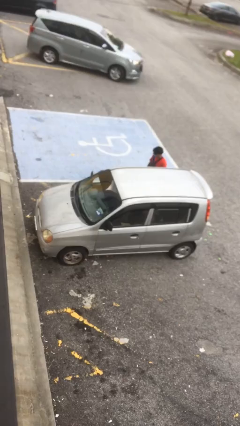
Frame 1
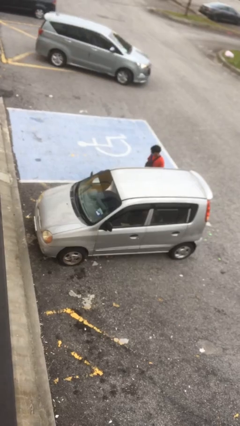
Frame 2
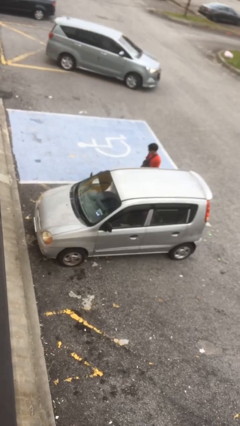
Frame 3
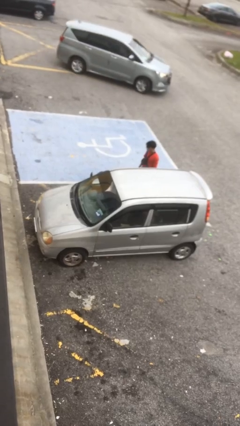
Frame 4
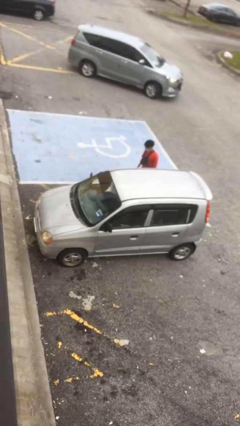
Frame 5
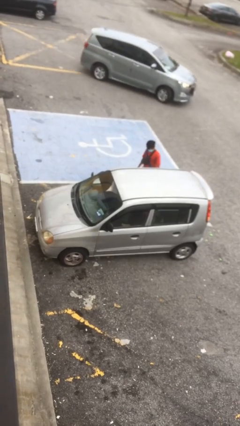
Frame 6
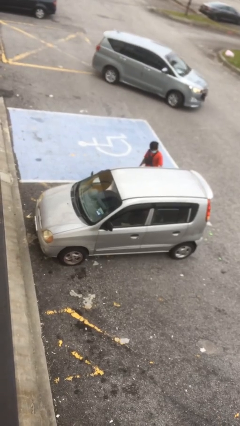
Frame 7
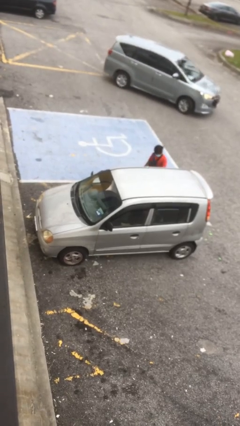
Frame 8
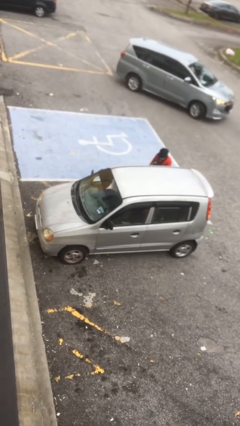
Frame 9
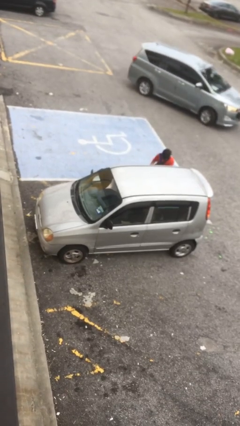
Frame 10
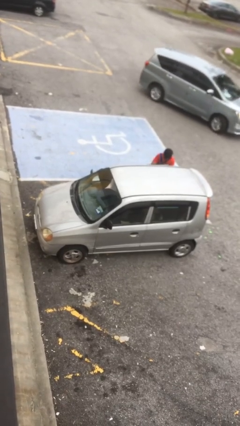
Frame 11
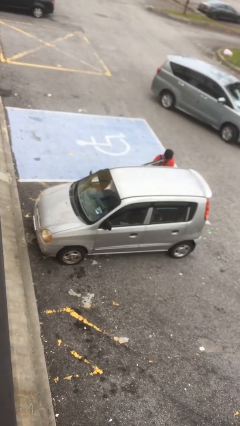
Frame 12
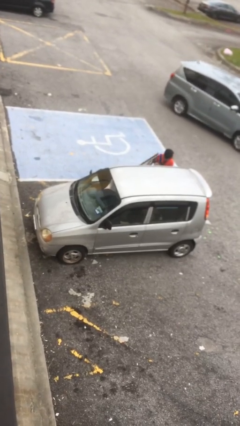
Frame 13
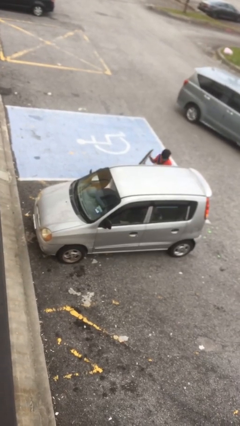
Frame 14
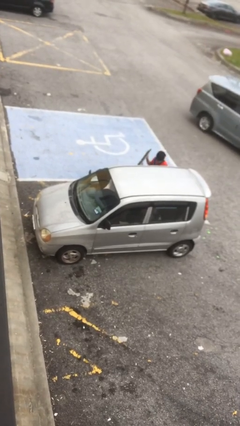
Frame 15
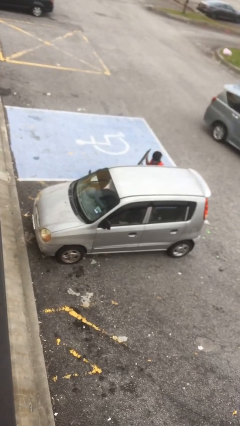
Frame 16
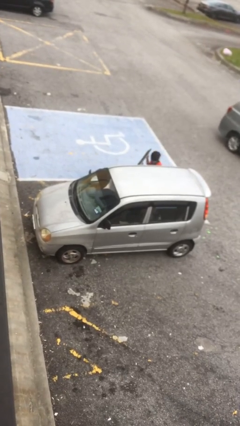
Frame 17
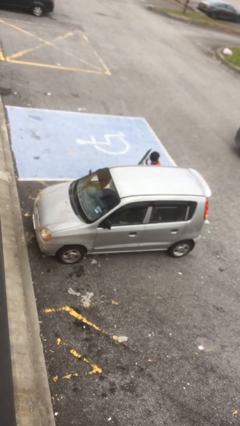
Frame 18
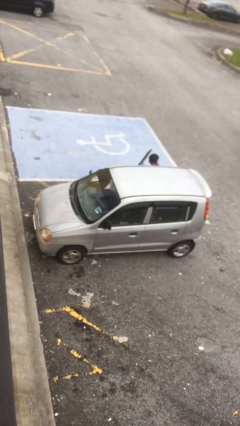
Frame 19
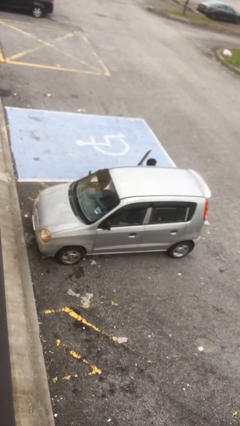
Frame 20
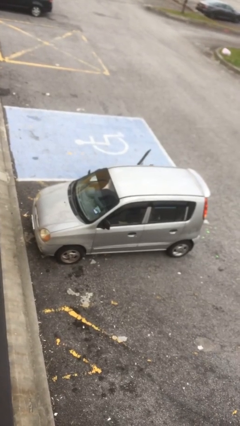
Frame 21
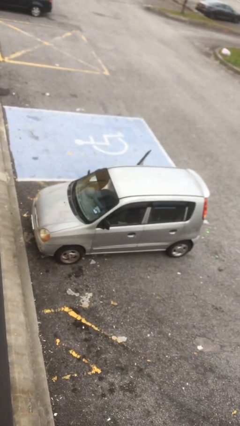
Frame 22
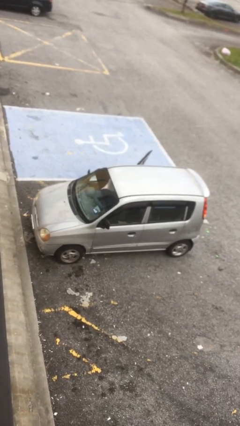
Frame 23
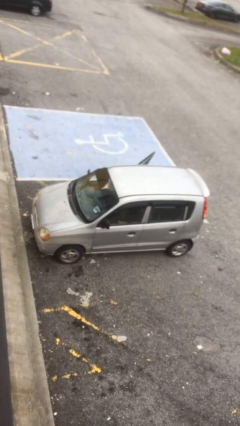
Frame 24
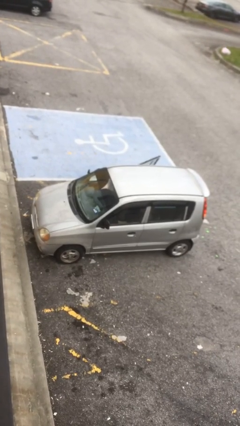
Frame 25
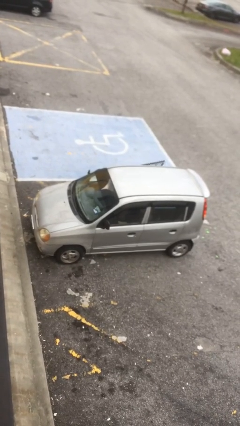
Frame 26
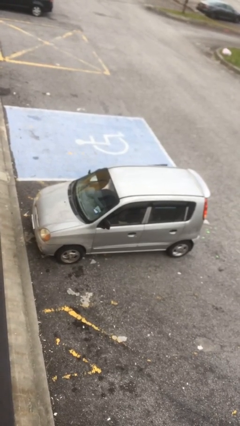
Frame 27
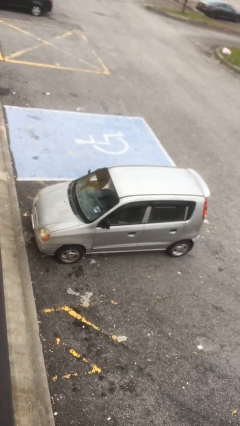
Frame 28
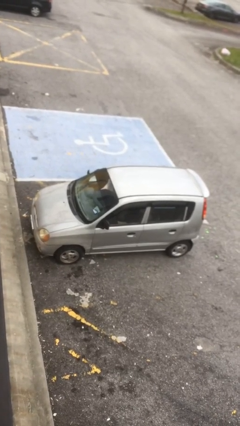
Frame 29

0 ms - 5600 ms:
car picks up person

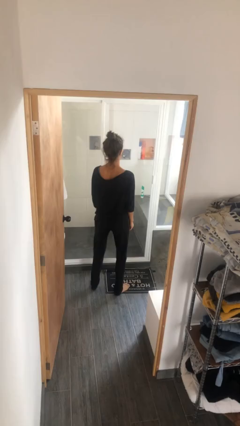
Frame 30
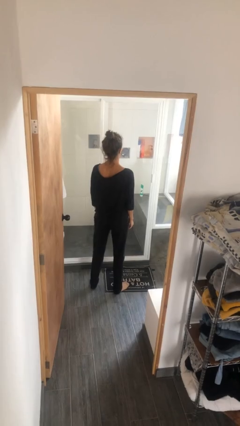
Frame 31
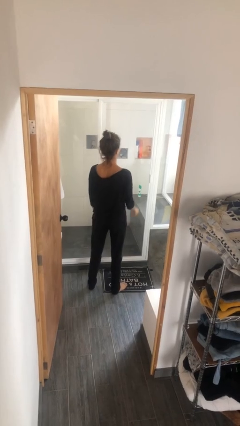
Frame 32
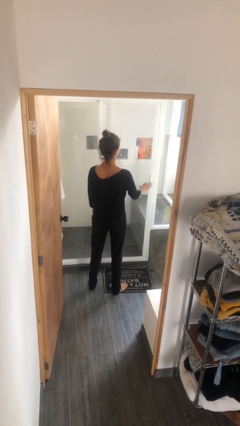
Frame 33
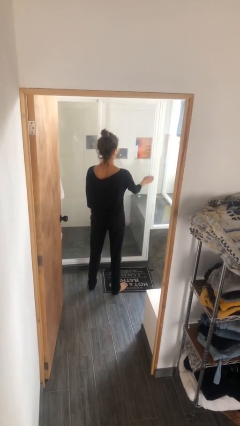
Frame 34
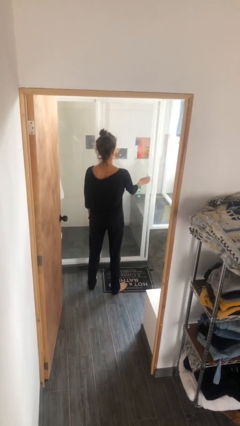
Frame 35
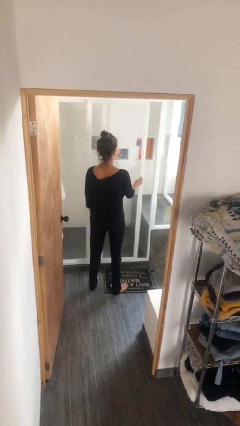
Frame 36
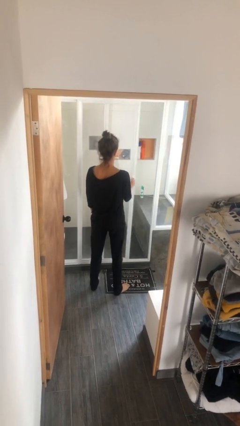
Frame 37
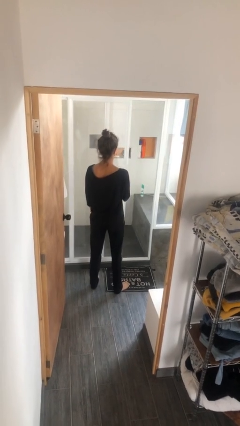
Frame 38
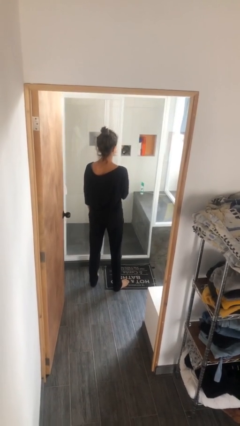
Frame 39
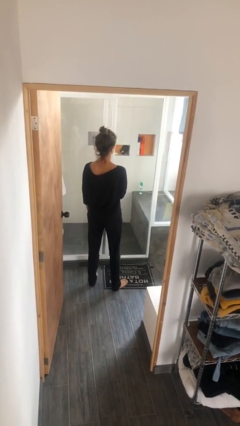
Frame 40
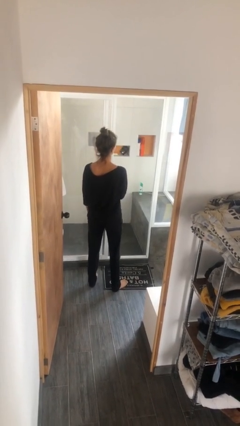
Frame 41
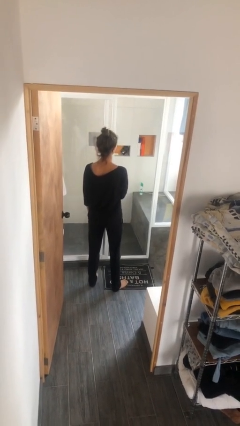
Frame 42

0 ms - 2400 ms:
person opens sliding door

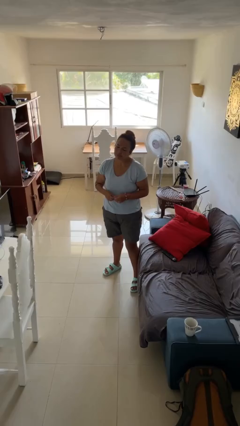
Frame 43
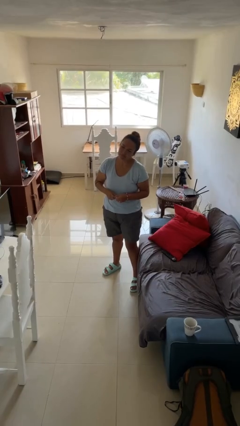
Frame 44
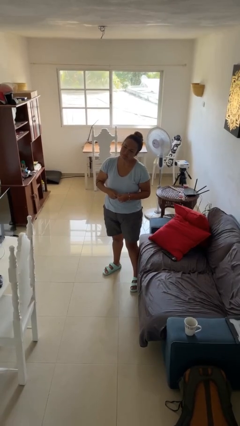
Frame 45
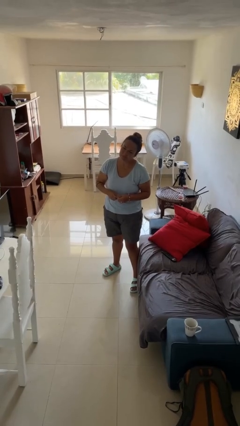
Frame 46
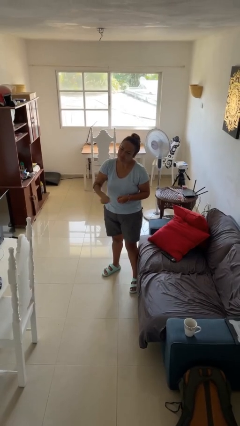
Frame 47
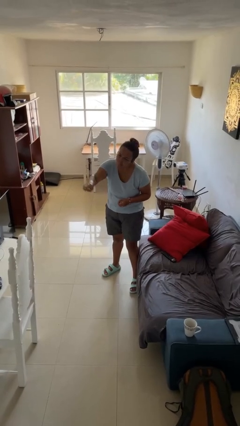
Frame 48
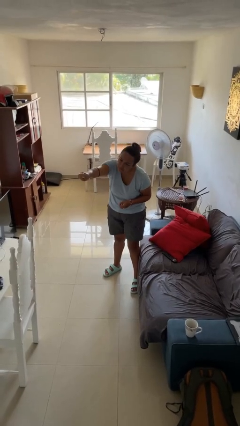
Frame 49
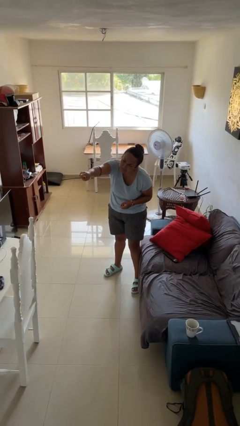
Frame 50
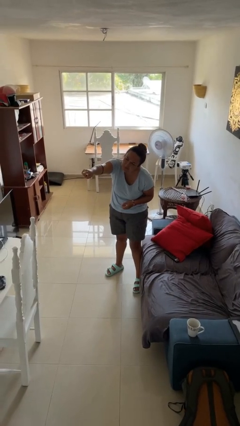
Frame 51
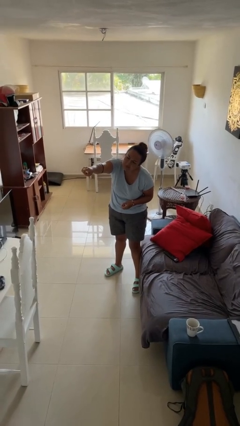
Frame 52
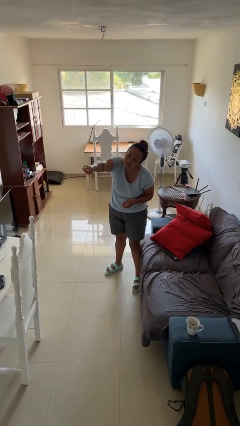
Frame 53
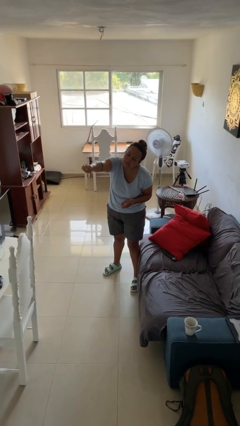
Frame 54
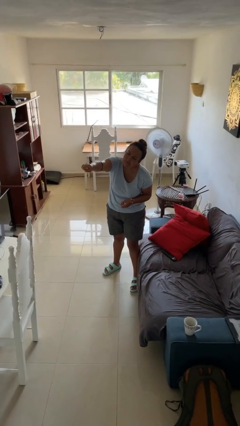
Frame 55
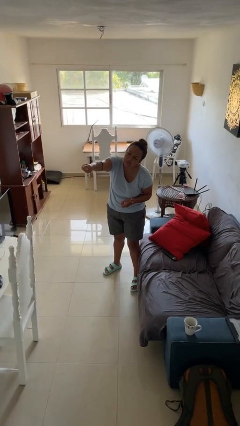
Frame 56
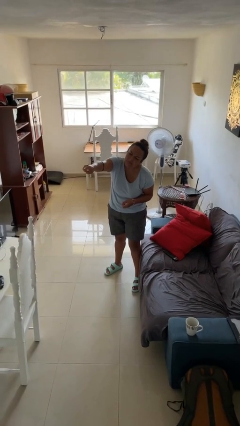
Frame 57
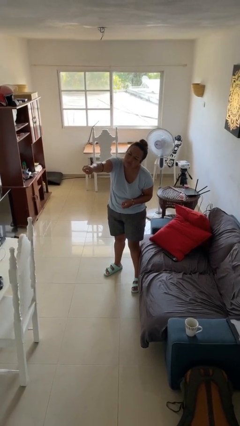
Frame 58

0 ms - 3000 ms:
person points at person

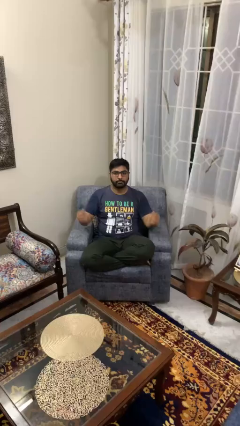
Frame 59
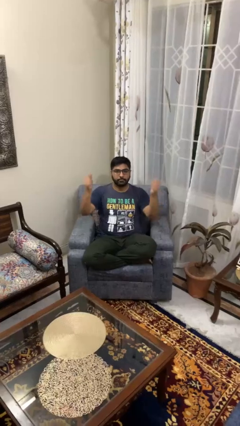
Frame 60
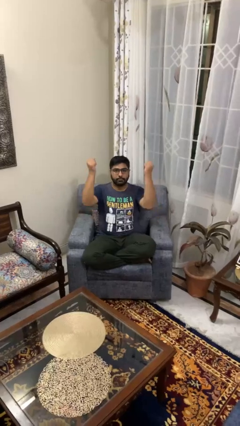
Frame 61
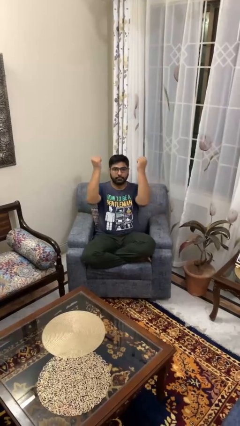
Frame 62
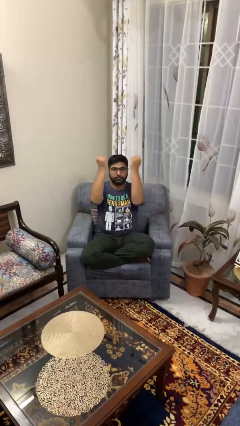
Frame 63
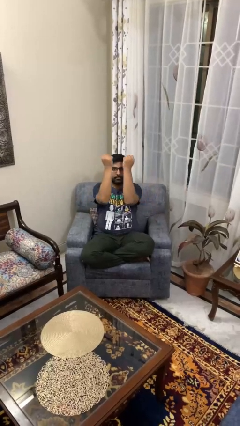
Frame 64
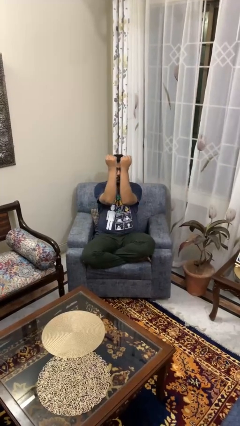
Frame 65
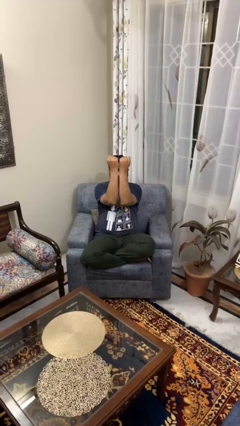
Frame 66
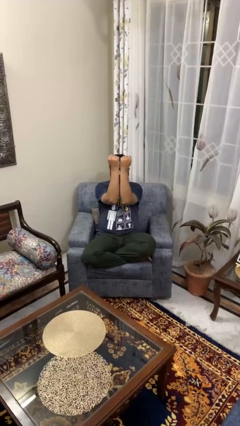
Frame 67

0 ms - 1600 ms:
person gestures zoom in

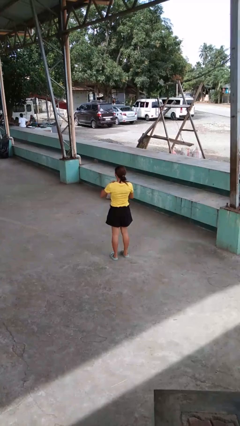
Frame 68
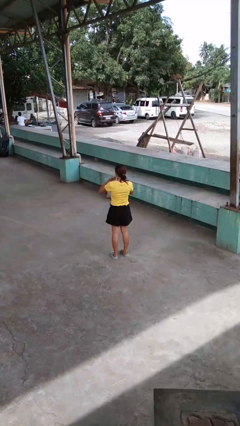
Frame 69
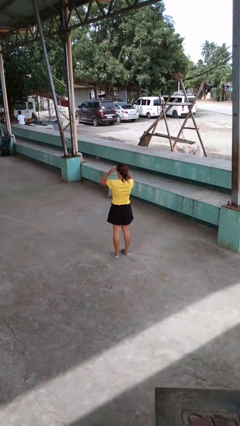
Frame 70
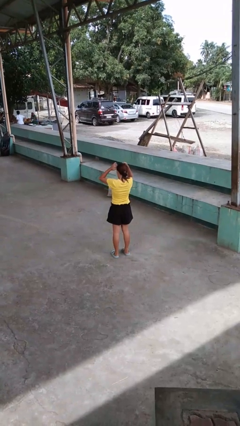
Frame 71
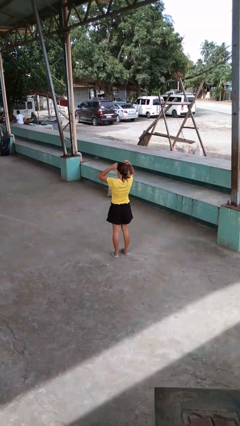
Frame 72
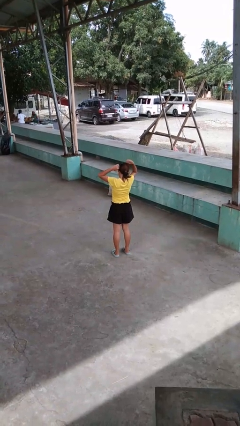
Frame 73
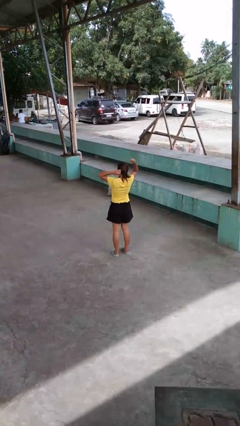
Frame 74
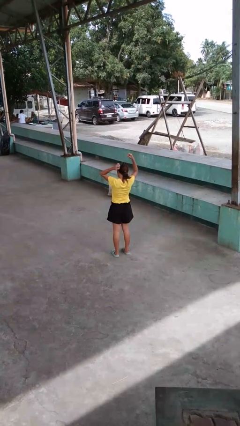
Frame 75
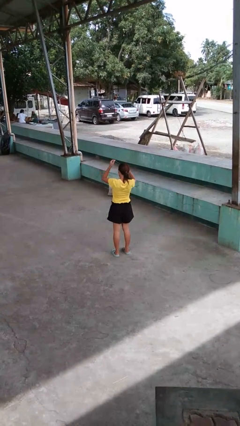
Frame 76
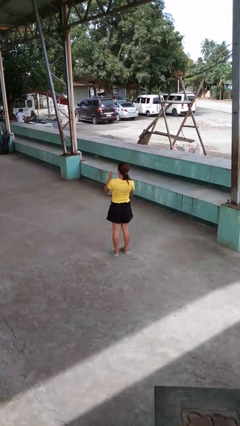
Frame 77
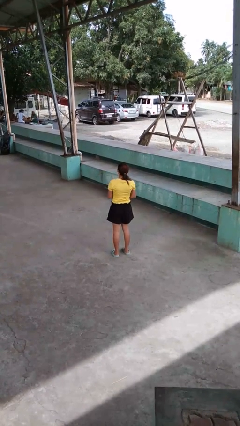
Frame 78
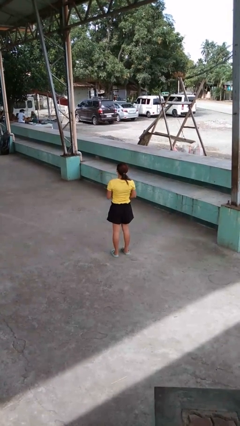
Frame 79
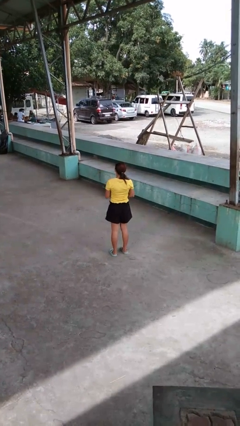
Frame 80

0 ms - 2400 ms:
person takes off necklace

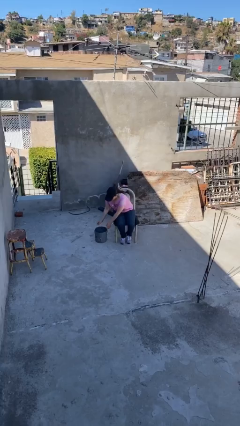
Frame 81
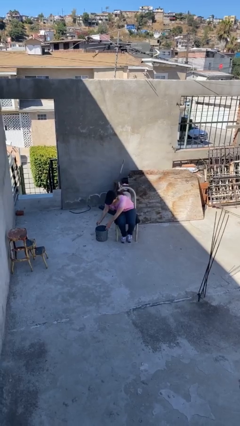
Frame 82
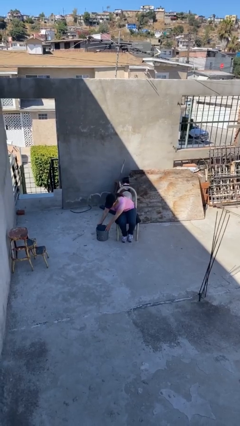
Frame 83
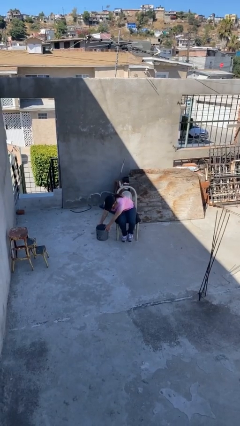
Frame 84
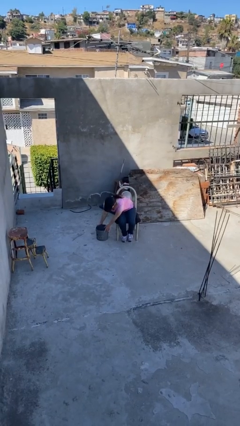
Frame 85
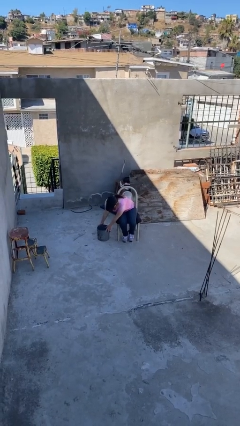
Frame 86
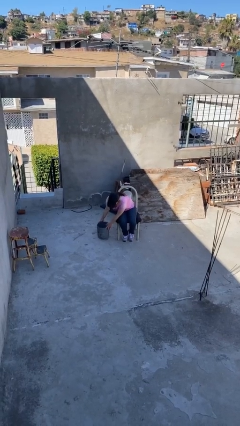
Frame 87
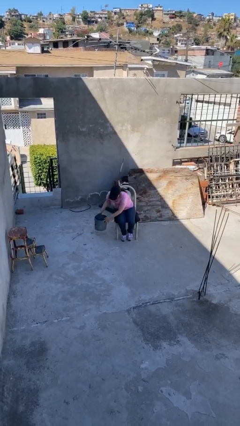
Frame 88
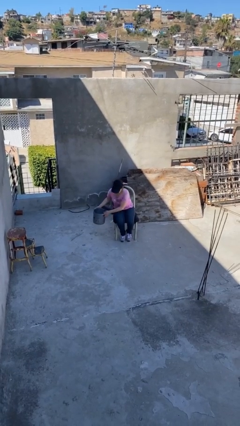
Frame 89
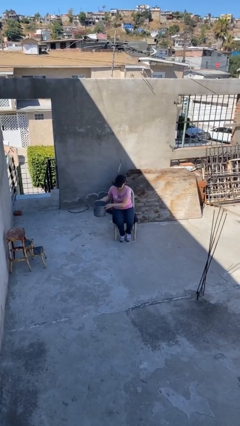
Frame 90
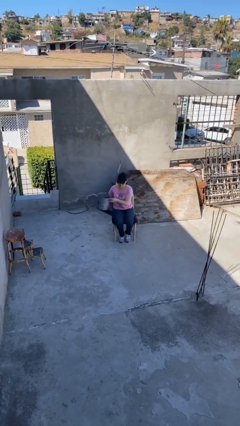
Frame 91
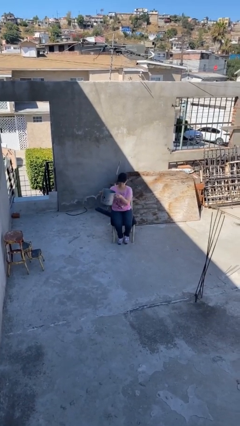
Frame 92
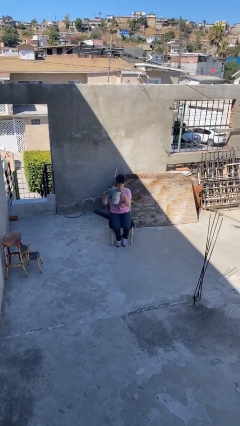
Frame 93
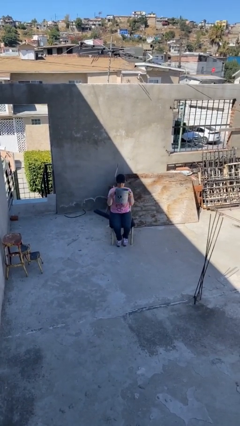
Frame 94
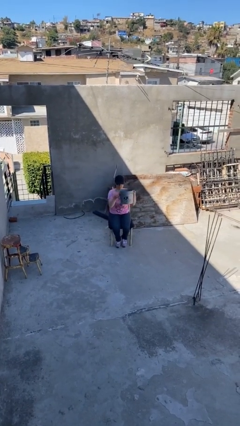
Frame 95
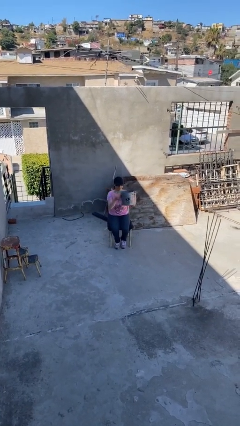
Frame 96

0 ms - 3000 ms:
person picks up object from floor
